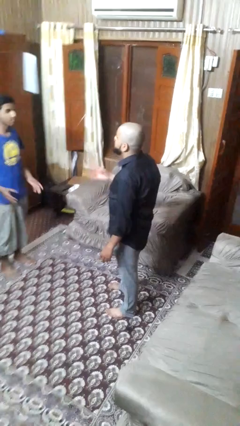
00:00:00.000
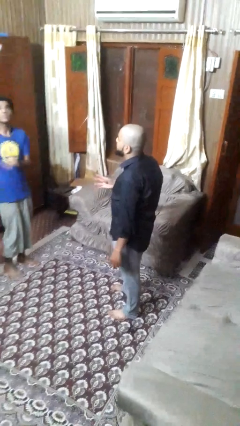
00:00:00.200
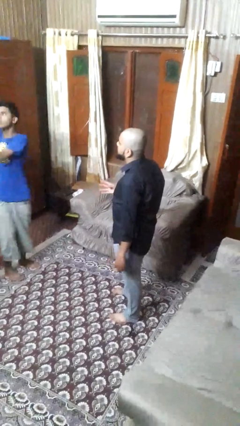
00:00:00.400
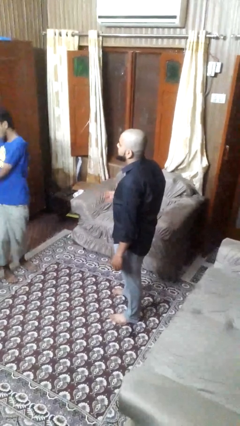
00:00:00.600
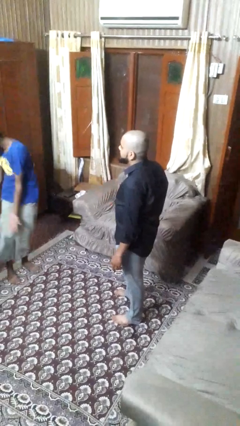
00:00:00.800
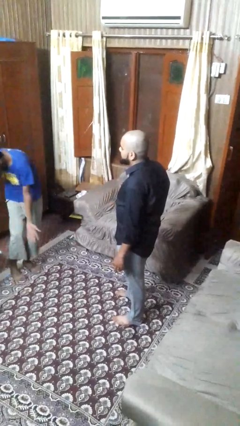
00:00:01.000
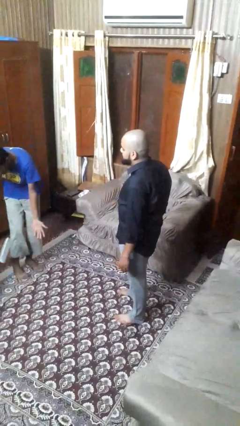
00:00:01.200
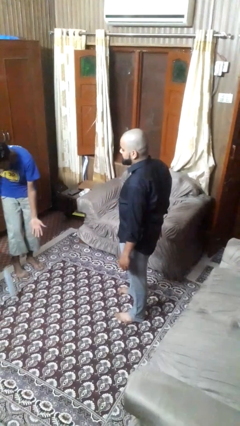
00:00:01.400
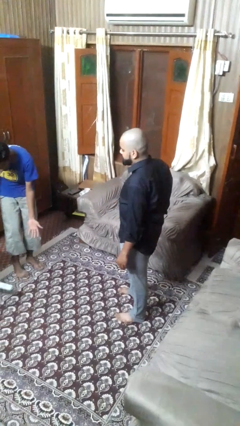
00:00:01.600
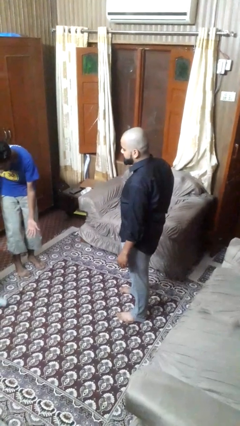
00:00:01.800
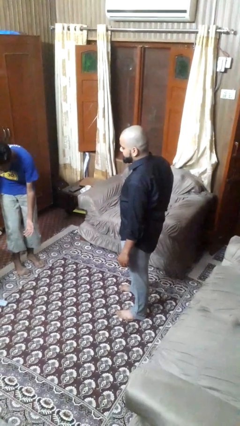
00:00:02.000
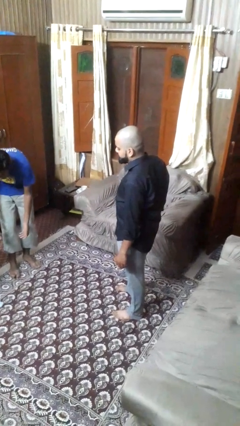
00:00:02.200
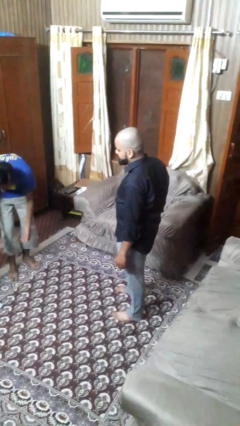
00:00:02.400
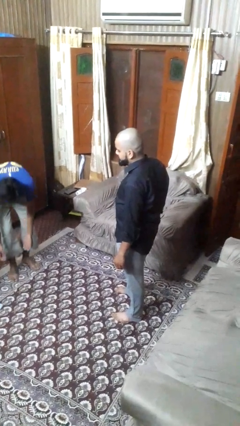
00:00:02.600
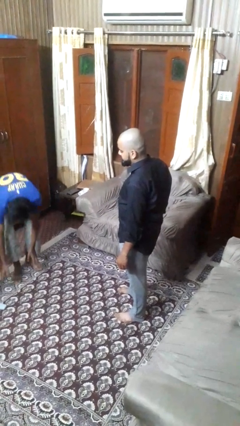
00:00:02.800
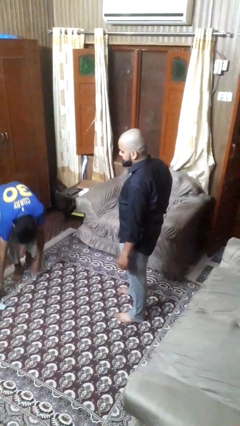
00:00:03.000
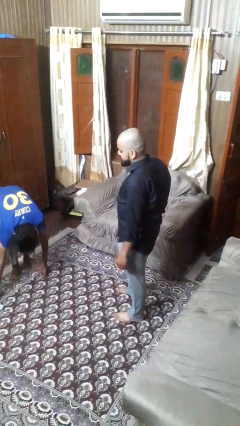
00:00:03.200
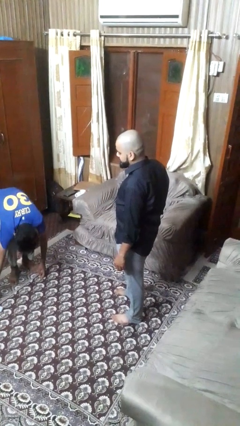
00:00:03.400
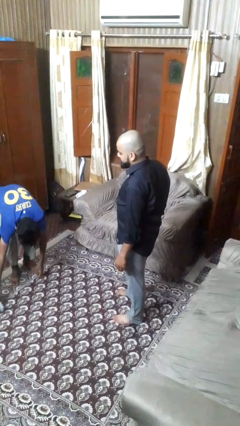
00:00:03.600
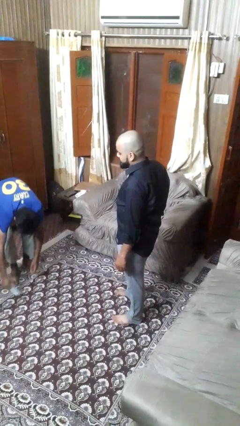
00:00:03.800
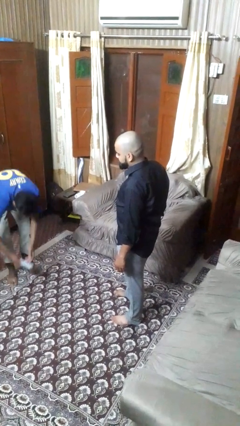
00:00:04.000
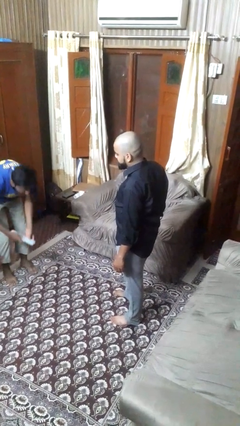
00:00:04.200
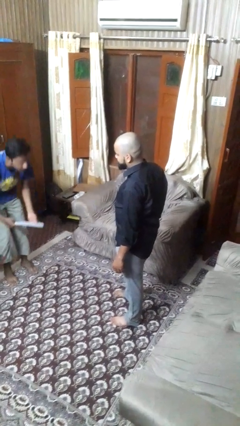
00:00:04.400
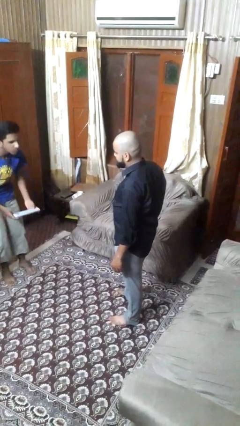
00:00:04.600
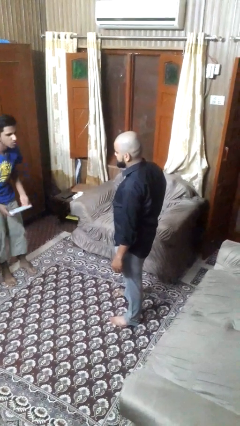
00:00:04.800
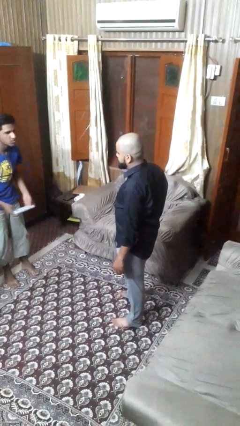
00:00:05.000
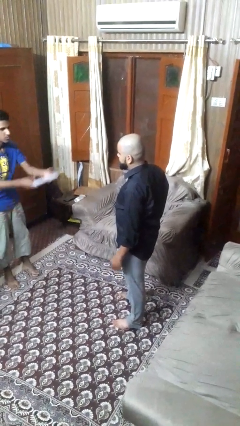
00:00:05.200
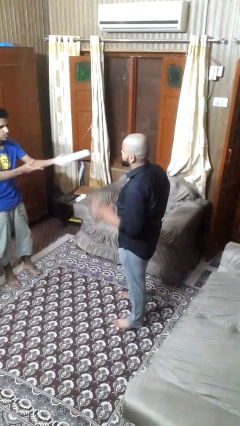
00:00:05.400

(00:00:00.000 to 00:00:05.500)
person throws object to person

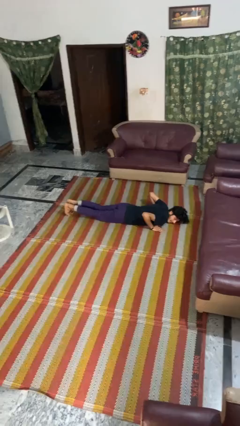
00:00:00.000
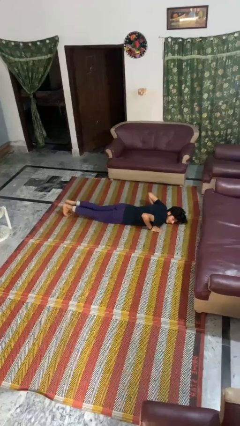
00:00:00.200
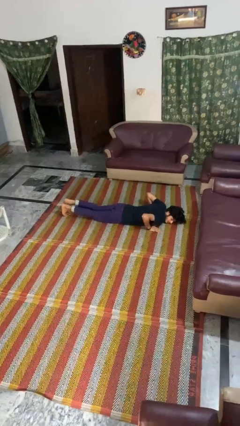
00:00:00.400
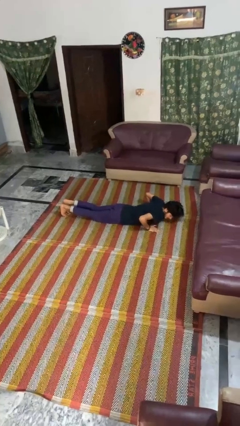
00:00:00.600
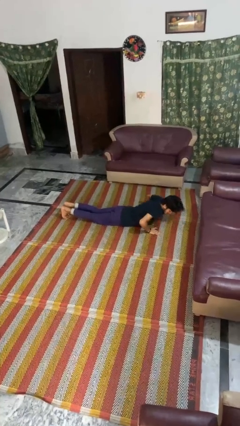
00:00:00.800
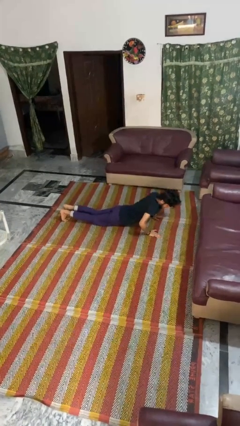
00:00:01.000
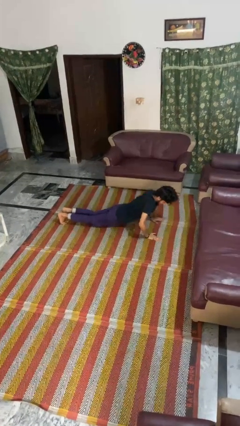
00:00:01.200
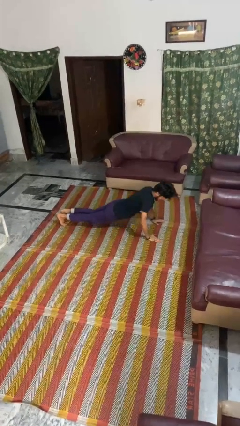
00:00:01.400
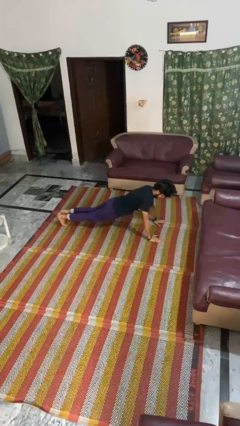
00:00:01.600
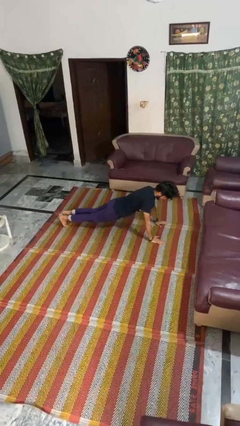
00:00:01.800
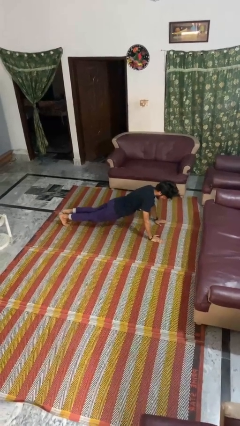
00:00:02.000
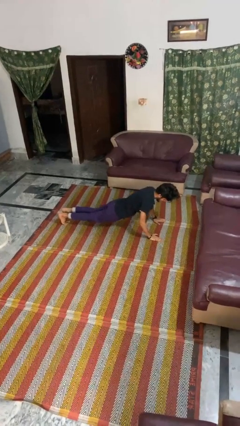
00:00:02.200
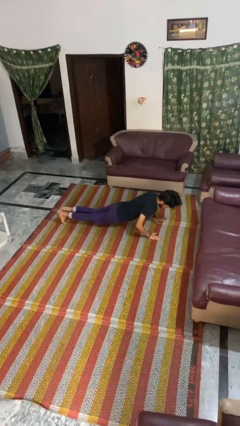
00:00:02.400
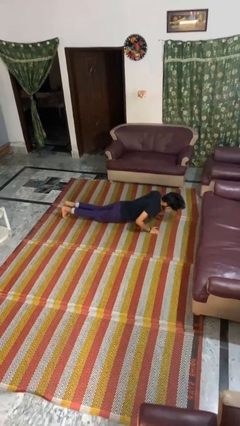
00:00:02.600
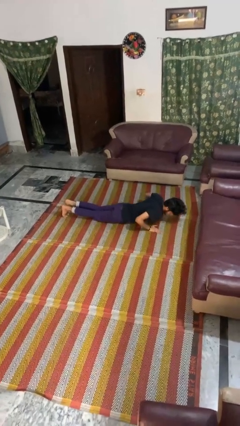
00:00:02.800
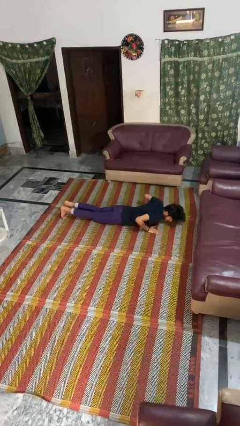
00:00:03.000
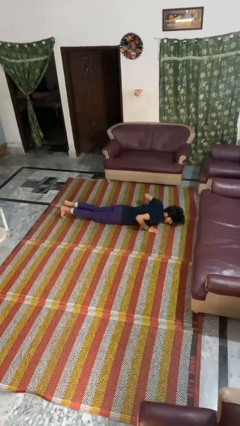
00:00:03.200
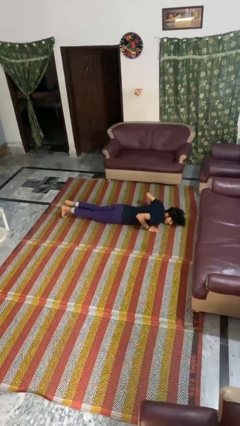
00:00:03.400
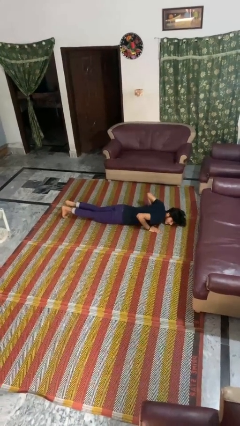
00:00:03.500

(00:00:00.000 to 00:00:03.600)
person exercises with pushup

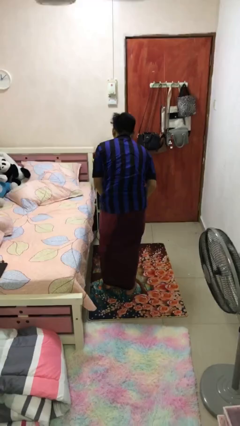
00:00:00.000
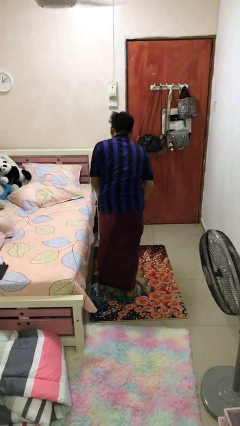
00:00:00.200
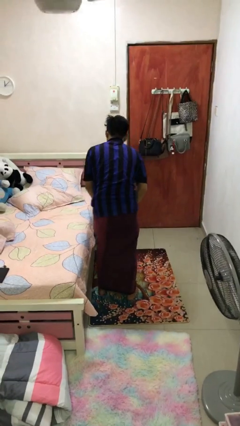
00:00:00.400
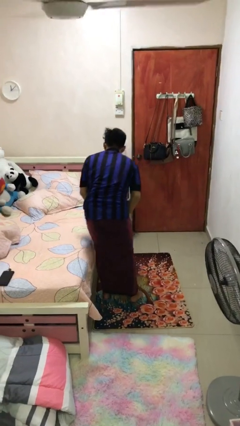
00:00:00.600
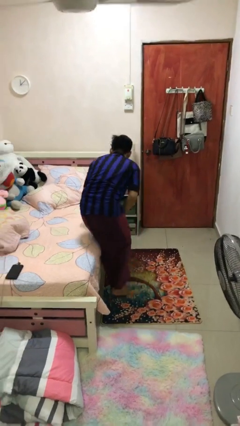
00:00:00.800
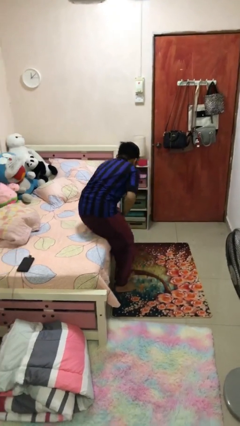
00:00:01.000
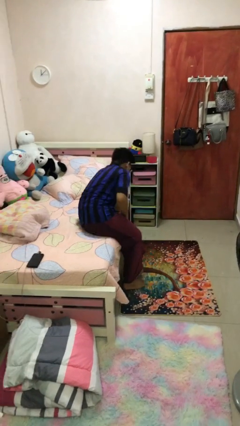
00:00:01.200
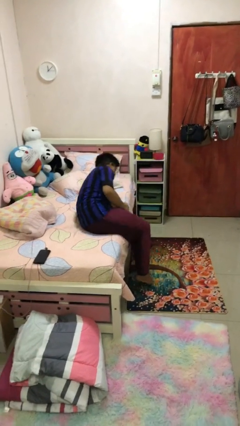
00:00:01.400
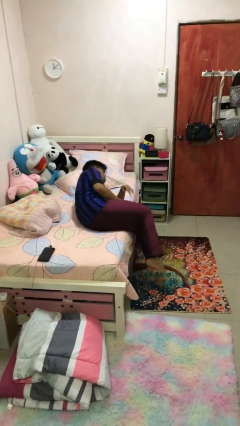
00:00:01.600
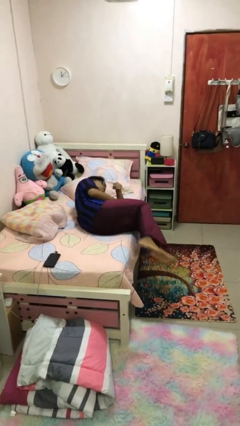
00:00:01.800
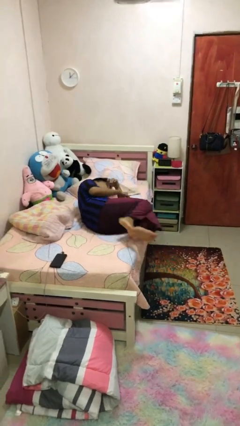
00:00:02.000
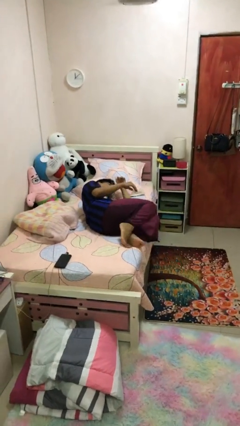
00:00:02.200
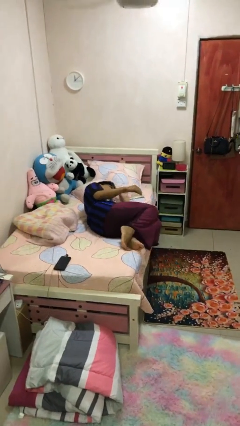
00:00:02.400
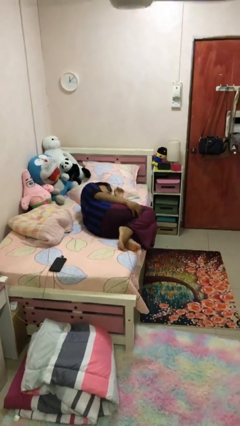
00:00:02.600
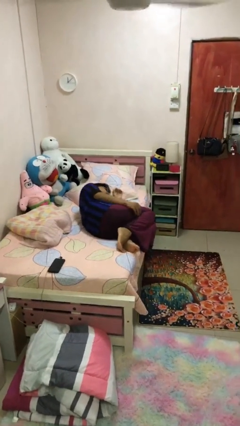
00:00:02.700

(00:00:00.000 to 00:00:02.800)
person lies down on bed

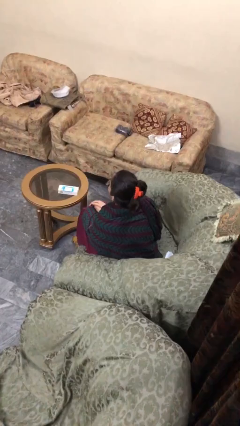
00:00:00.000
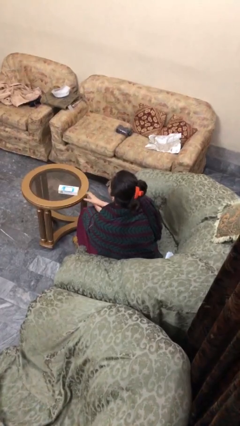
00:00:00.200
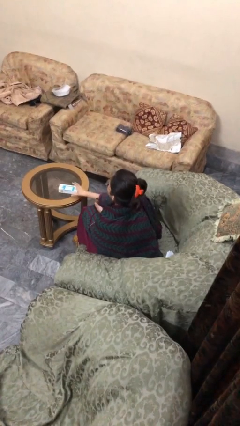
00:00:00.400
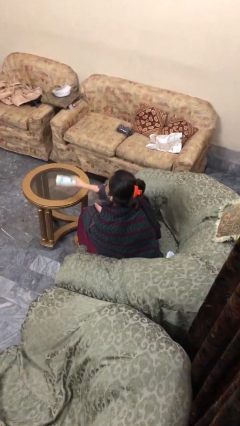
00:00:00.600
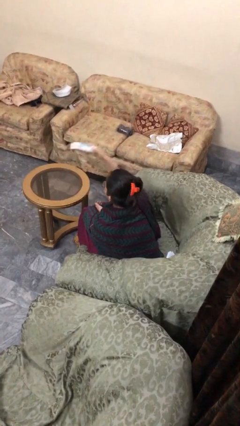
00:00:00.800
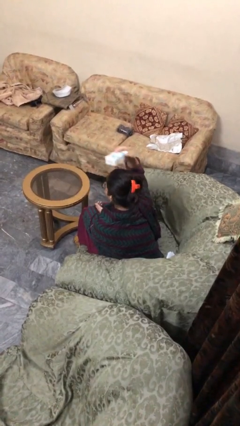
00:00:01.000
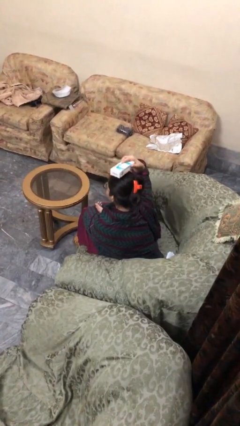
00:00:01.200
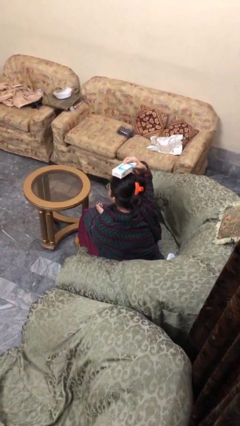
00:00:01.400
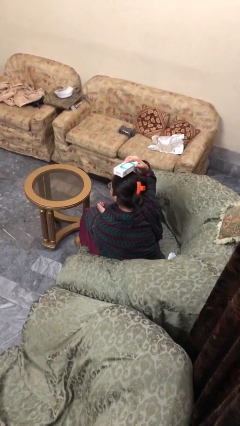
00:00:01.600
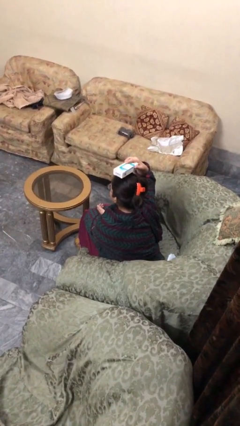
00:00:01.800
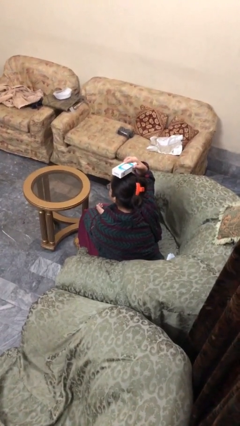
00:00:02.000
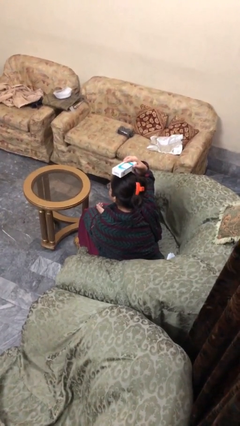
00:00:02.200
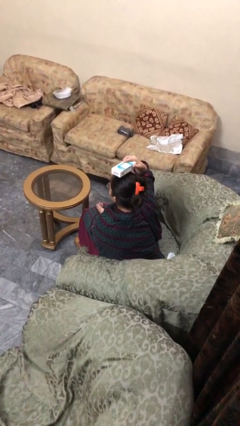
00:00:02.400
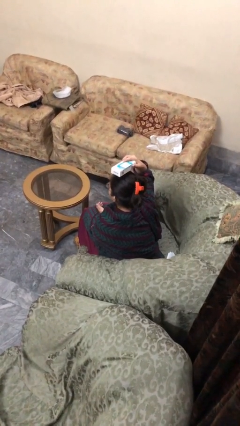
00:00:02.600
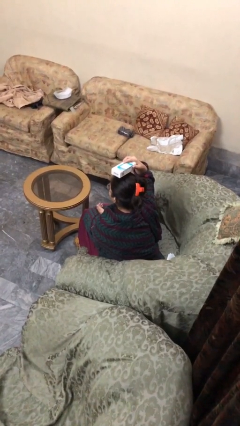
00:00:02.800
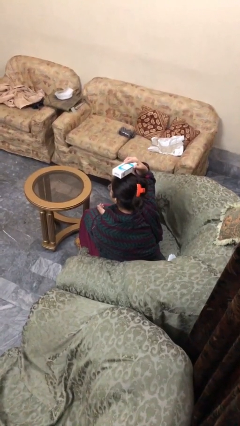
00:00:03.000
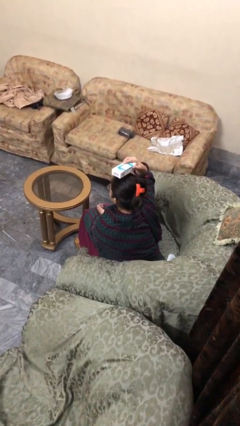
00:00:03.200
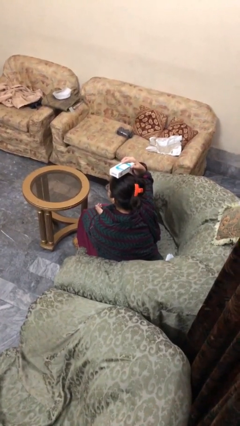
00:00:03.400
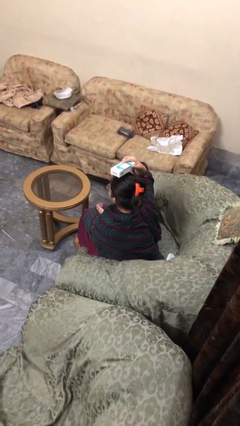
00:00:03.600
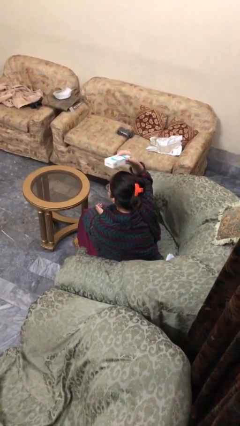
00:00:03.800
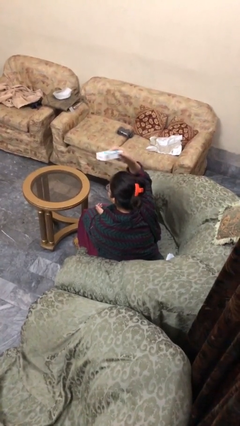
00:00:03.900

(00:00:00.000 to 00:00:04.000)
person holds object above head

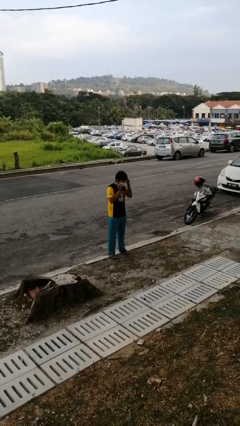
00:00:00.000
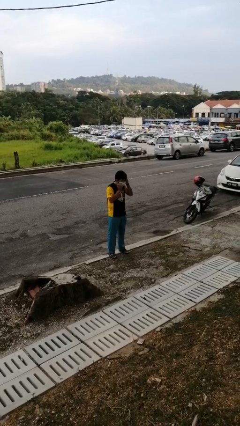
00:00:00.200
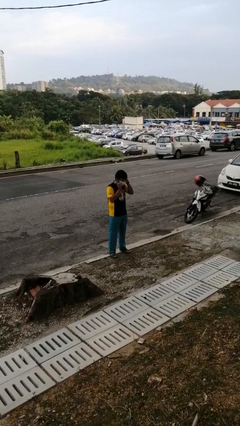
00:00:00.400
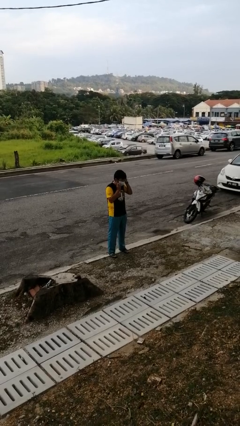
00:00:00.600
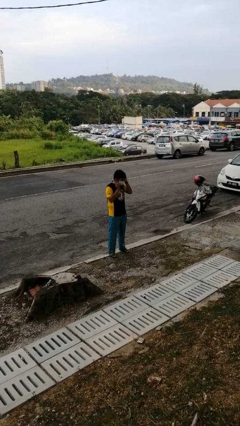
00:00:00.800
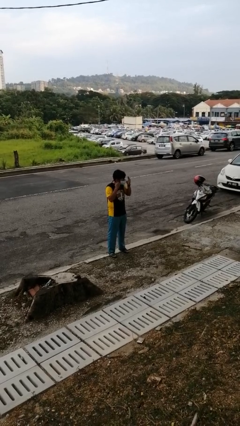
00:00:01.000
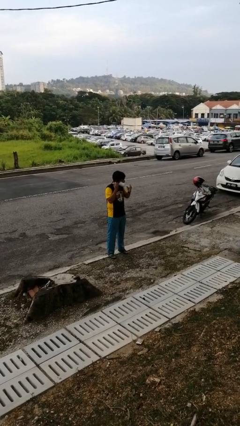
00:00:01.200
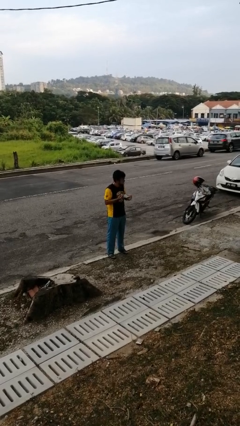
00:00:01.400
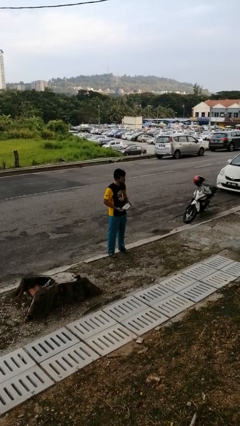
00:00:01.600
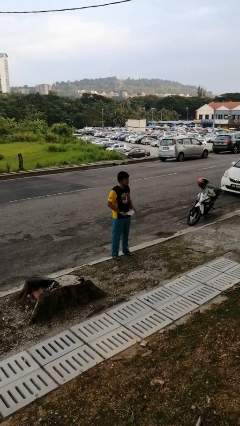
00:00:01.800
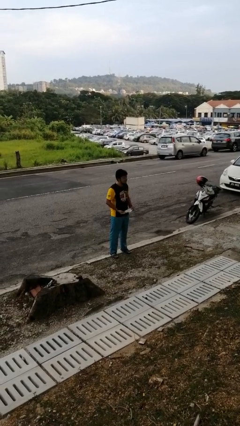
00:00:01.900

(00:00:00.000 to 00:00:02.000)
person takes off facemask
